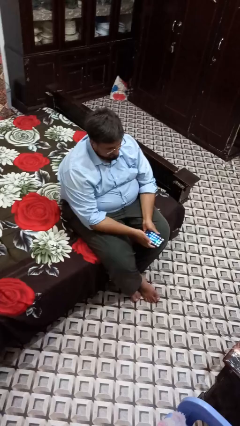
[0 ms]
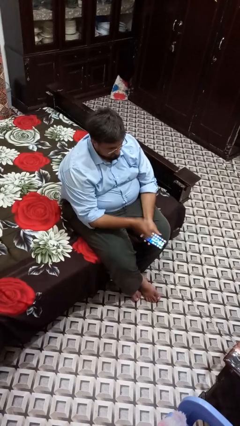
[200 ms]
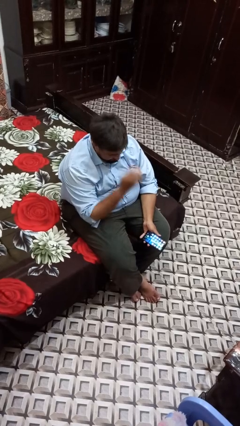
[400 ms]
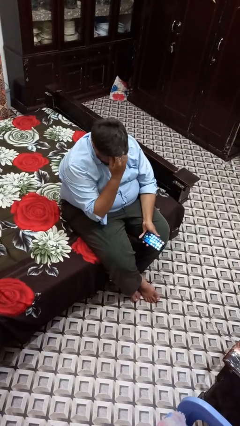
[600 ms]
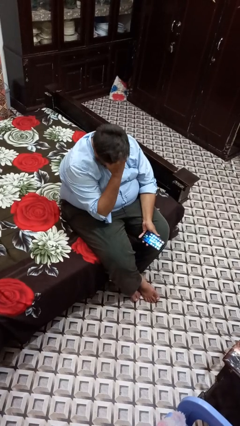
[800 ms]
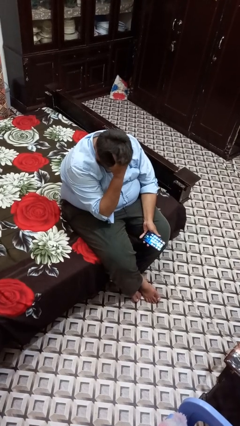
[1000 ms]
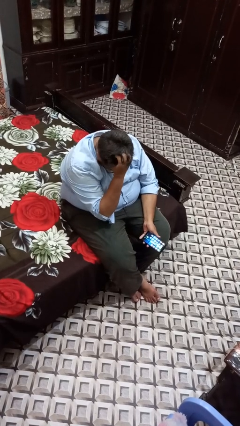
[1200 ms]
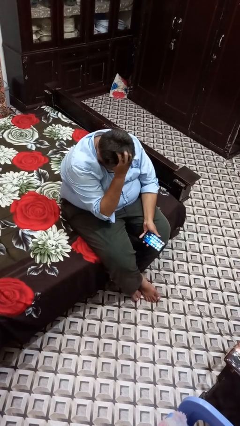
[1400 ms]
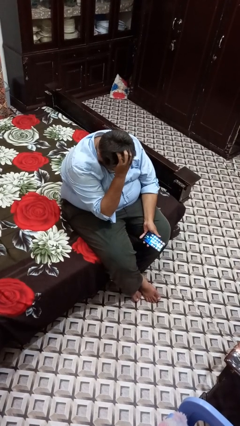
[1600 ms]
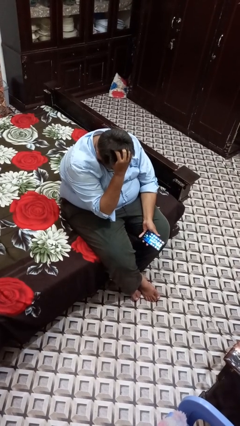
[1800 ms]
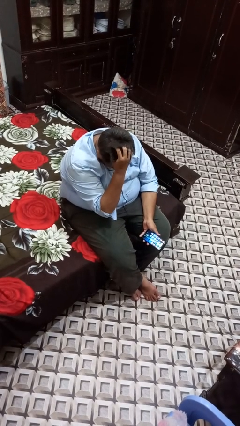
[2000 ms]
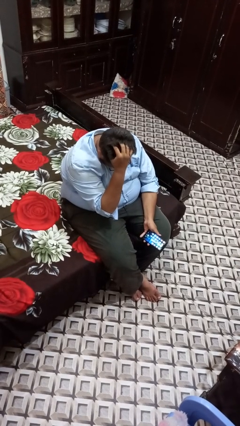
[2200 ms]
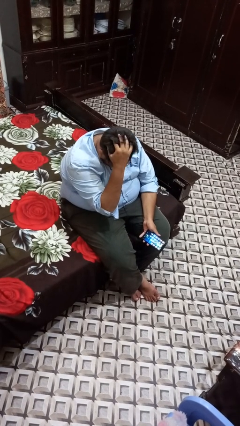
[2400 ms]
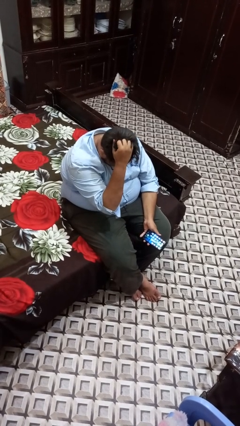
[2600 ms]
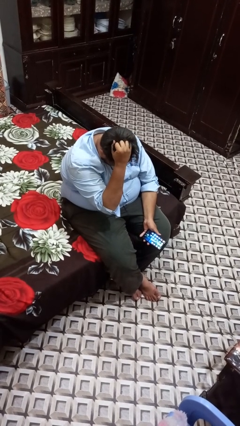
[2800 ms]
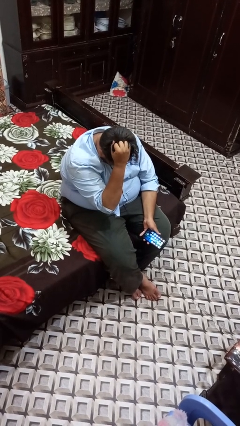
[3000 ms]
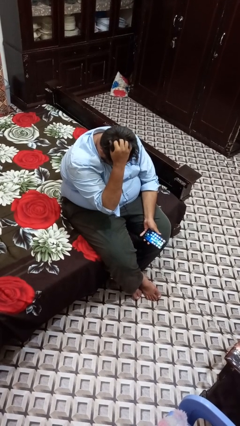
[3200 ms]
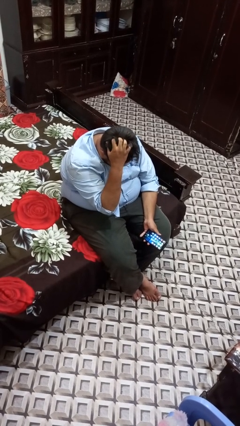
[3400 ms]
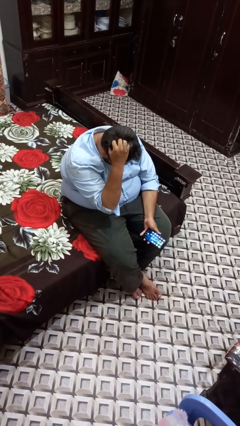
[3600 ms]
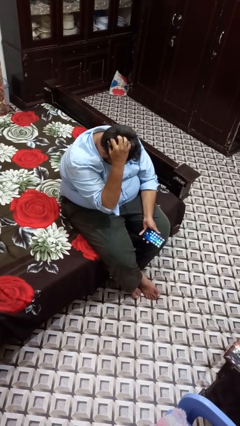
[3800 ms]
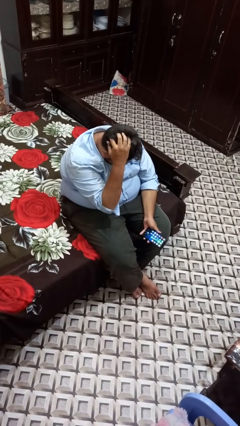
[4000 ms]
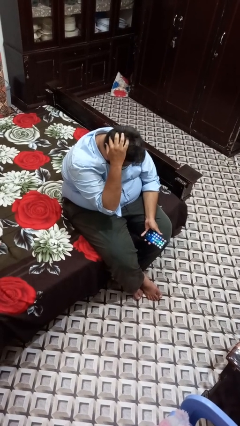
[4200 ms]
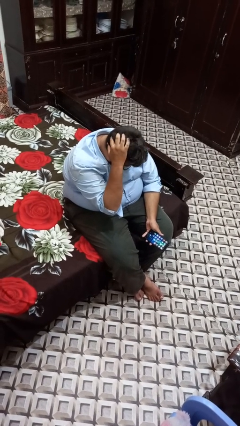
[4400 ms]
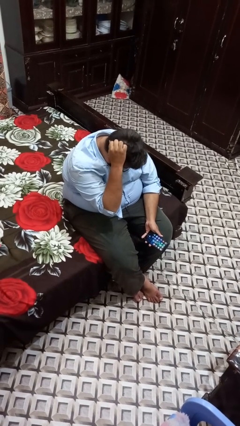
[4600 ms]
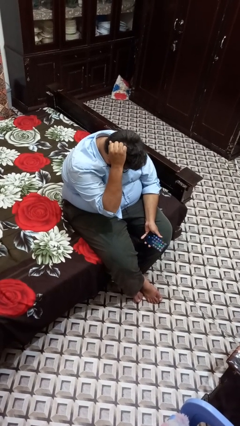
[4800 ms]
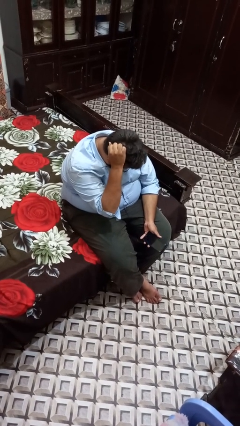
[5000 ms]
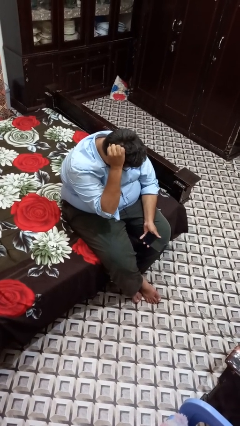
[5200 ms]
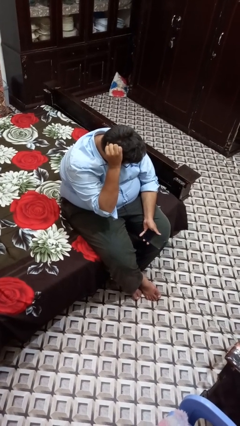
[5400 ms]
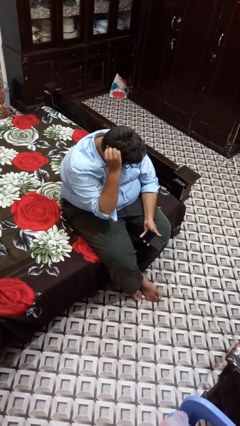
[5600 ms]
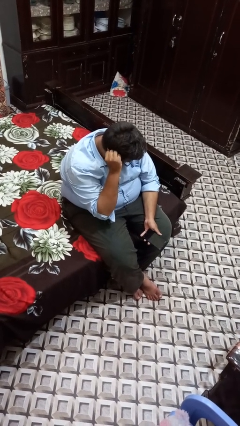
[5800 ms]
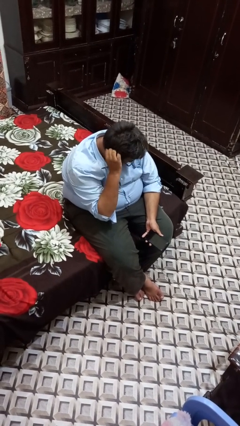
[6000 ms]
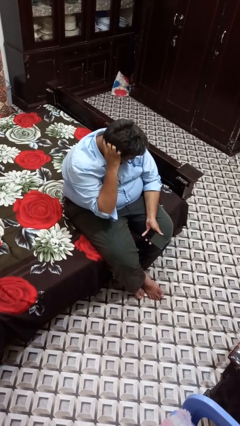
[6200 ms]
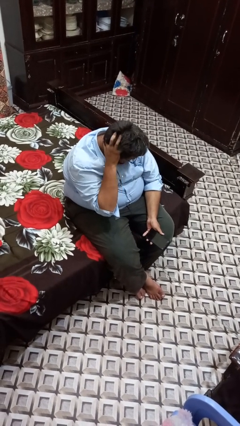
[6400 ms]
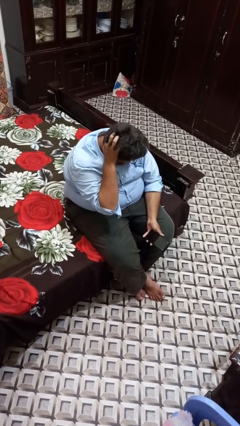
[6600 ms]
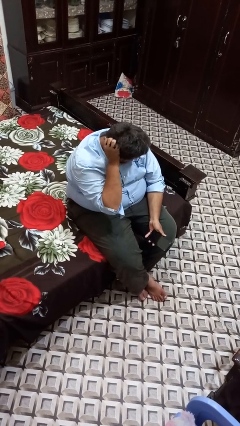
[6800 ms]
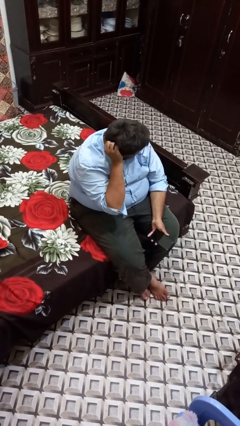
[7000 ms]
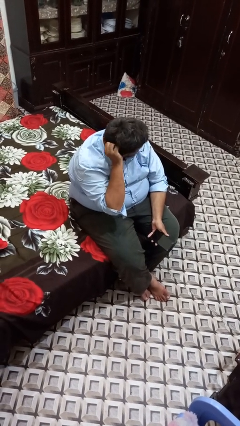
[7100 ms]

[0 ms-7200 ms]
person strokes hair

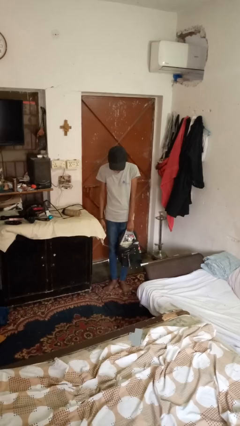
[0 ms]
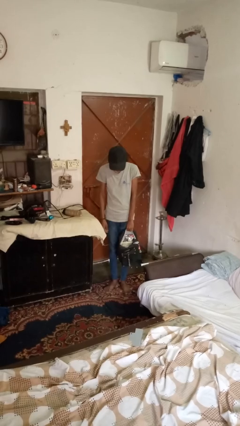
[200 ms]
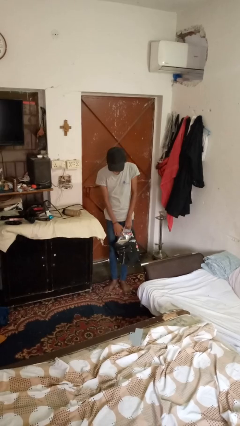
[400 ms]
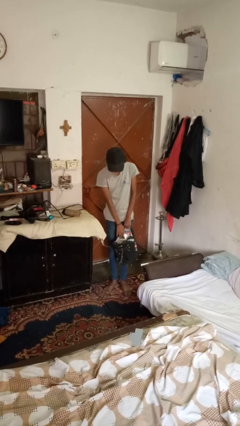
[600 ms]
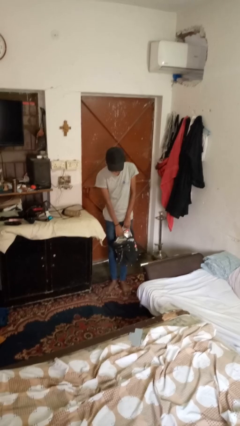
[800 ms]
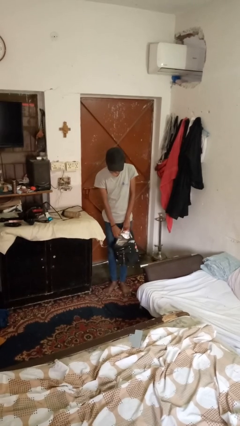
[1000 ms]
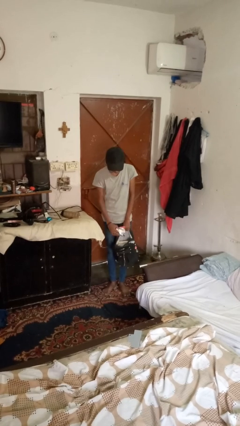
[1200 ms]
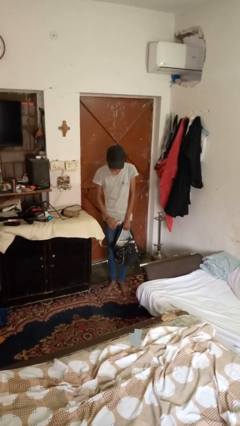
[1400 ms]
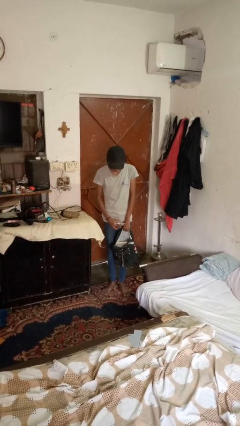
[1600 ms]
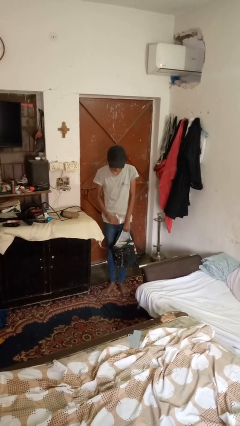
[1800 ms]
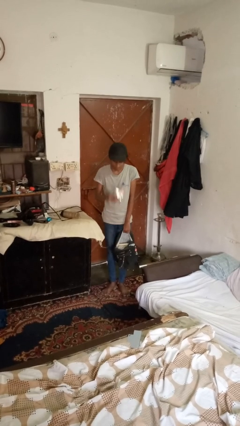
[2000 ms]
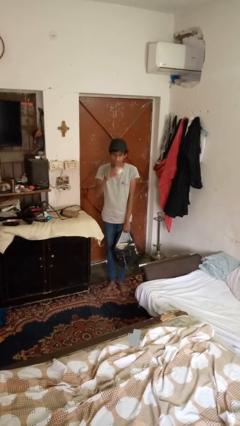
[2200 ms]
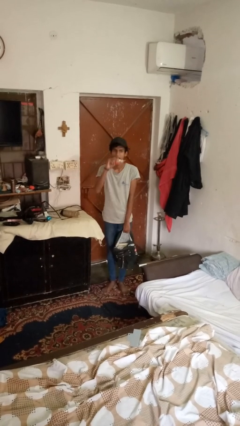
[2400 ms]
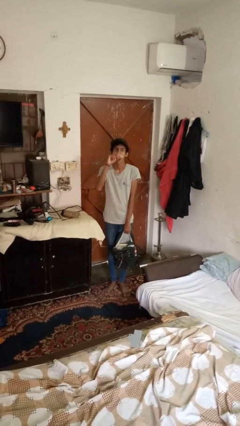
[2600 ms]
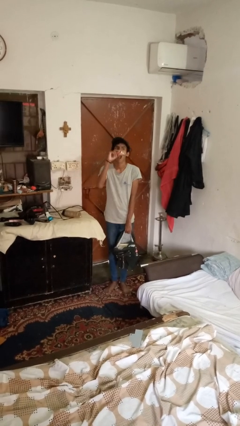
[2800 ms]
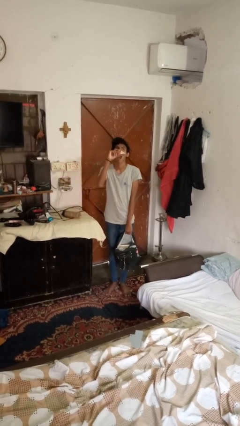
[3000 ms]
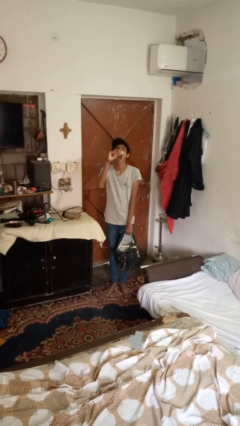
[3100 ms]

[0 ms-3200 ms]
person eats snack from bag

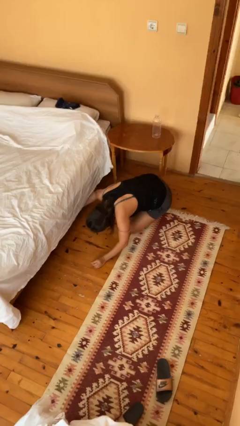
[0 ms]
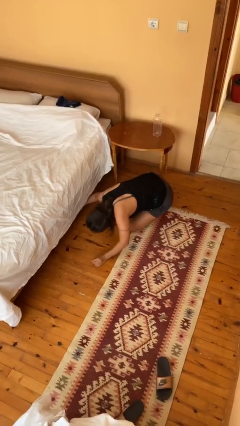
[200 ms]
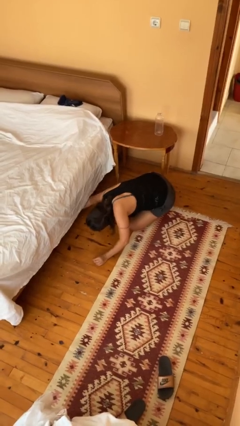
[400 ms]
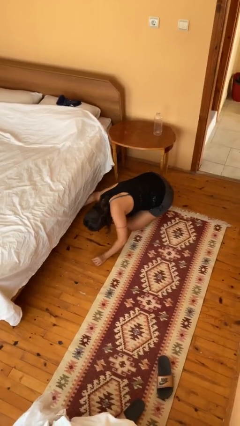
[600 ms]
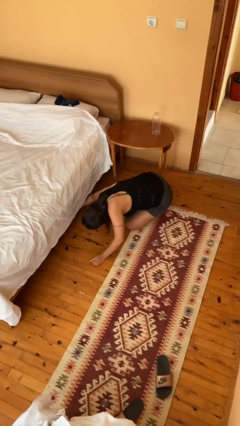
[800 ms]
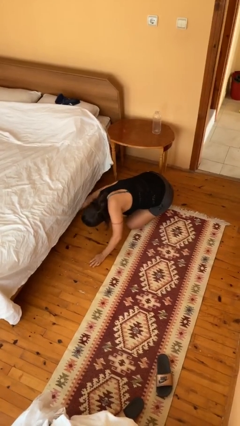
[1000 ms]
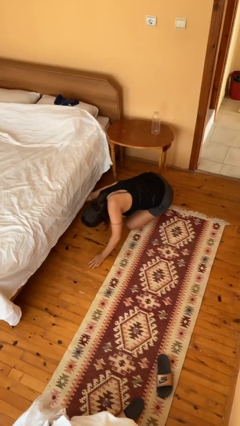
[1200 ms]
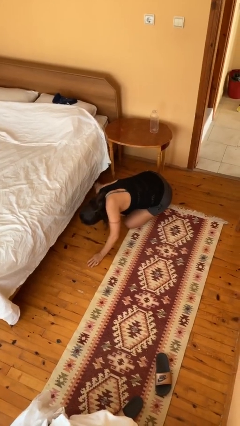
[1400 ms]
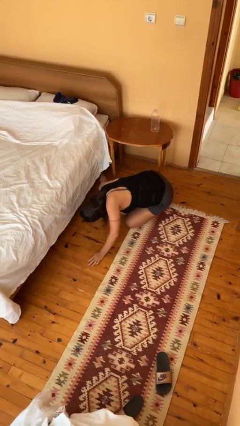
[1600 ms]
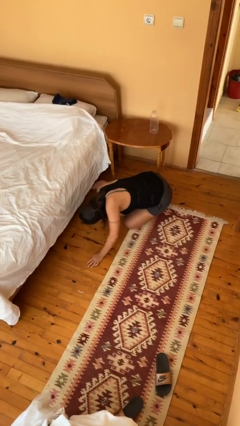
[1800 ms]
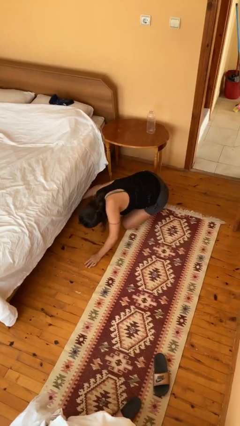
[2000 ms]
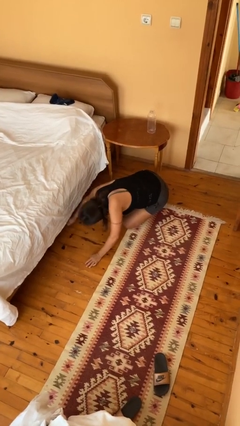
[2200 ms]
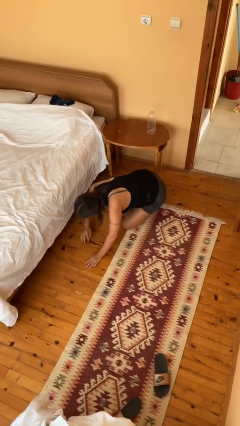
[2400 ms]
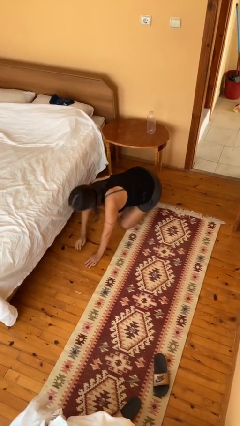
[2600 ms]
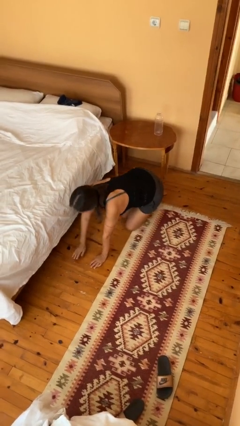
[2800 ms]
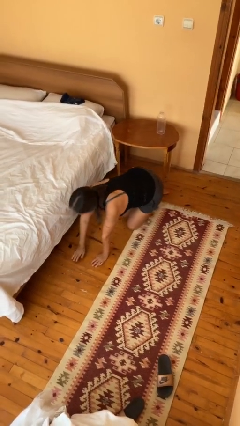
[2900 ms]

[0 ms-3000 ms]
person searches under bed

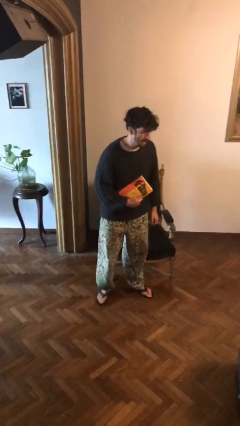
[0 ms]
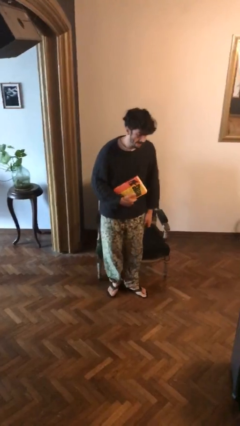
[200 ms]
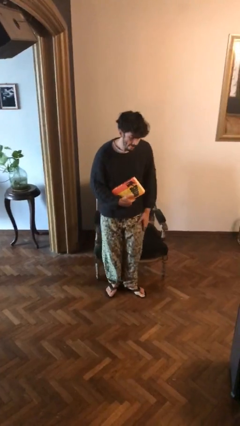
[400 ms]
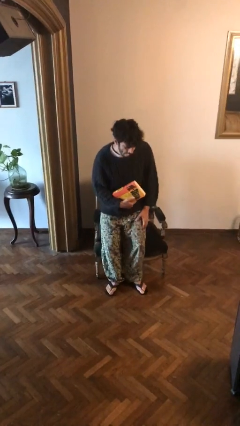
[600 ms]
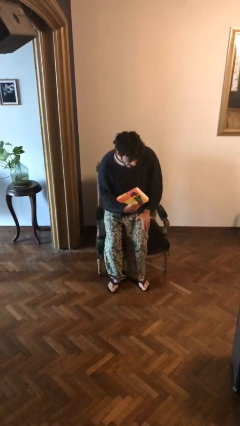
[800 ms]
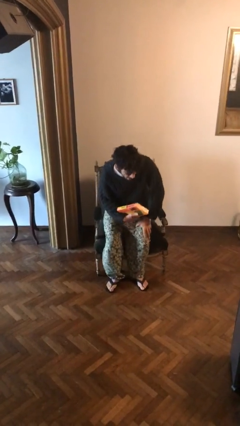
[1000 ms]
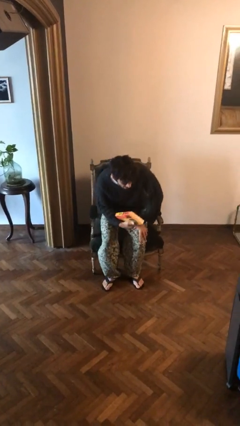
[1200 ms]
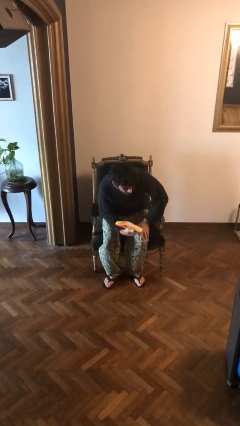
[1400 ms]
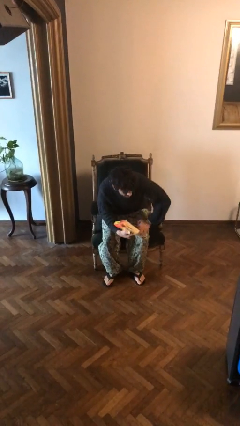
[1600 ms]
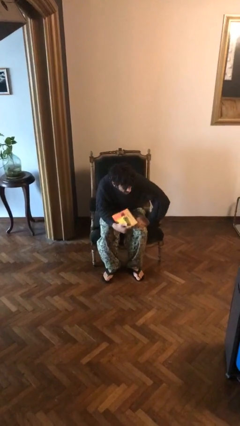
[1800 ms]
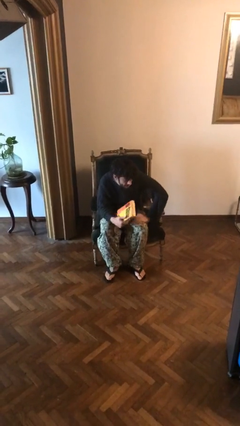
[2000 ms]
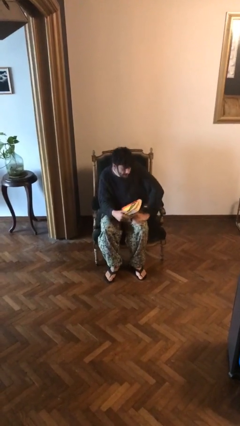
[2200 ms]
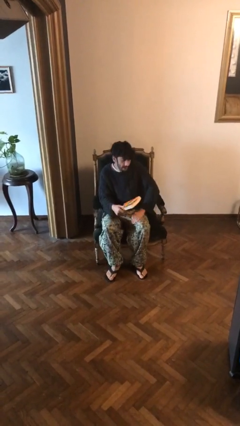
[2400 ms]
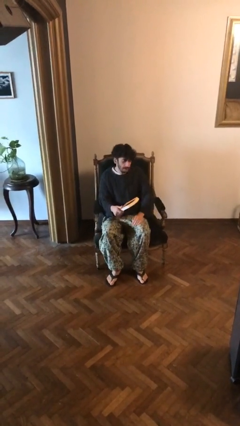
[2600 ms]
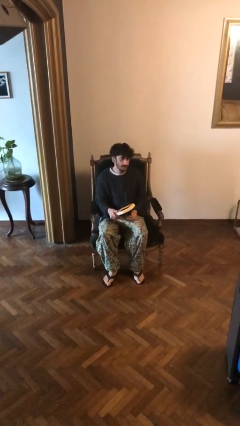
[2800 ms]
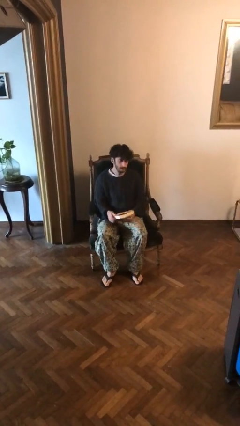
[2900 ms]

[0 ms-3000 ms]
person sits down

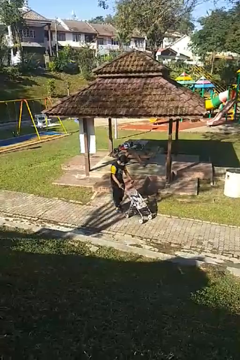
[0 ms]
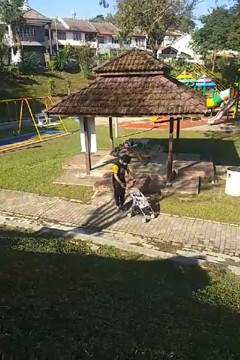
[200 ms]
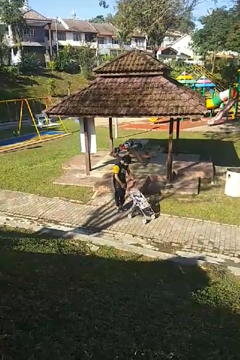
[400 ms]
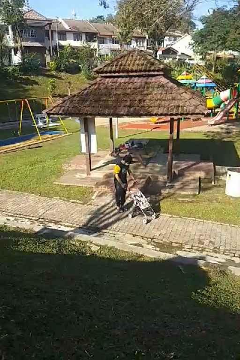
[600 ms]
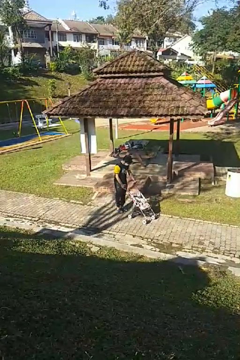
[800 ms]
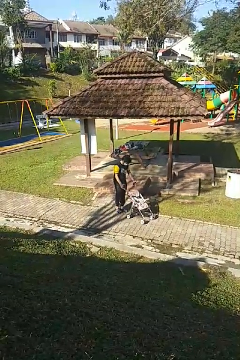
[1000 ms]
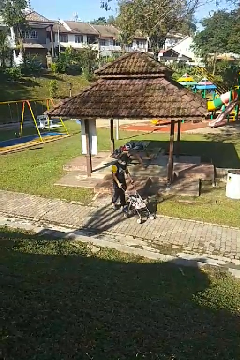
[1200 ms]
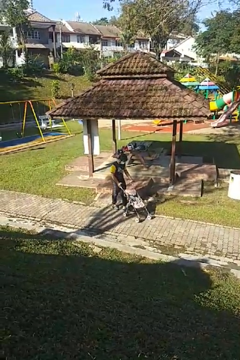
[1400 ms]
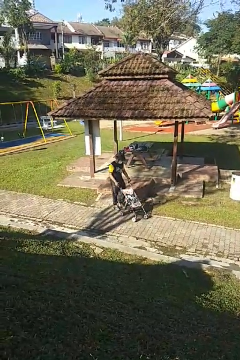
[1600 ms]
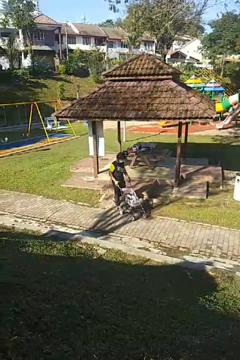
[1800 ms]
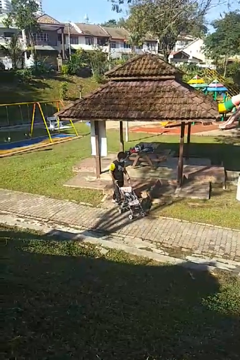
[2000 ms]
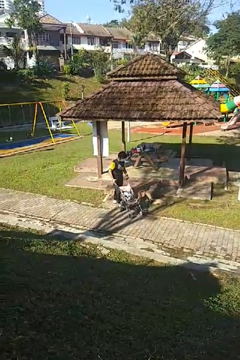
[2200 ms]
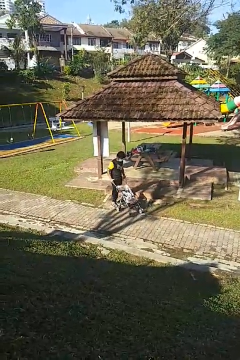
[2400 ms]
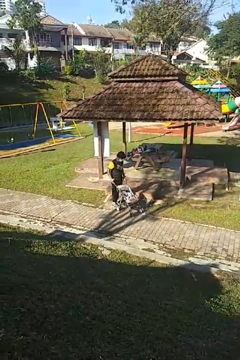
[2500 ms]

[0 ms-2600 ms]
person pulls wheeled cart
